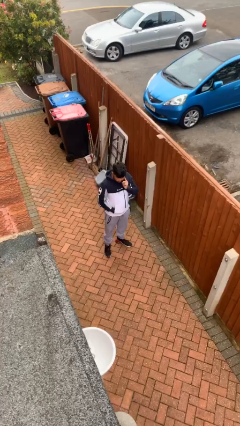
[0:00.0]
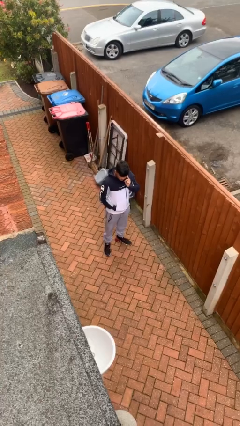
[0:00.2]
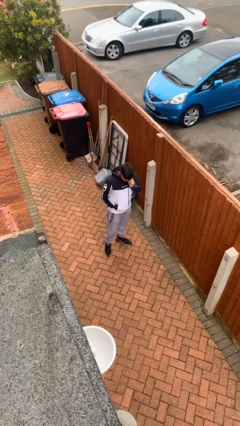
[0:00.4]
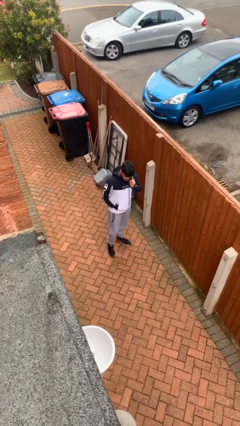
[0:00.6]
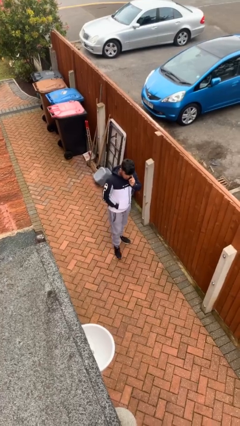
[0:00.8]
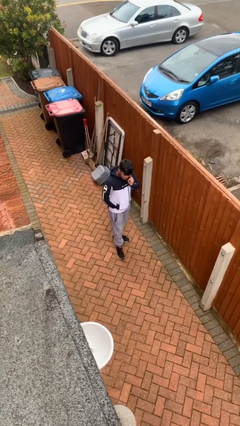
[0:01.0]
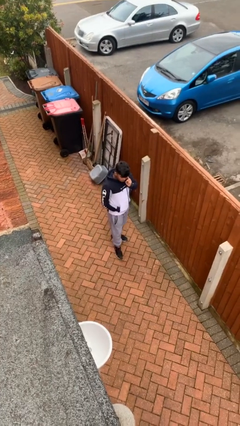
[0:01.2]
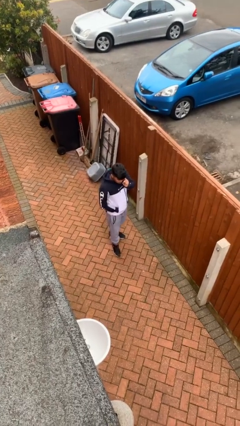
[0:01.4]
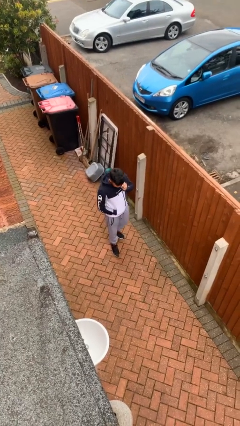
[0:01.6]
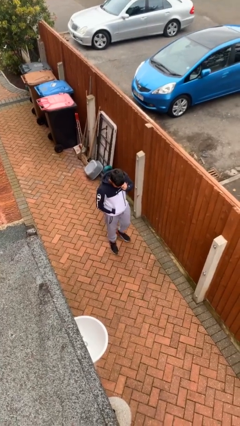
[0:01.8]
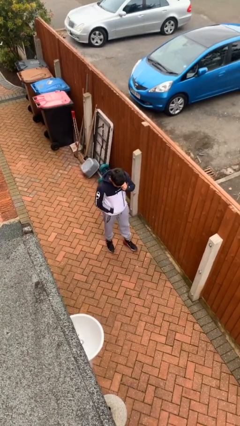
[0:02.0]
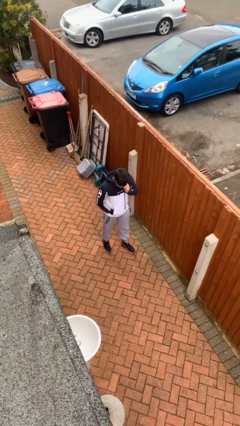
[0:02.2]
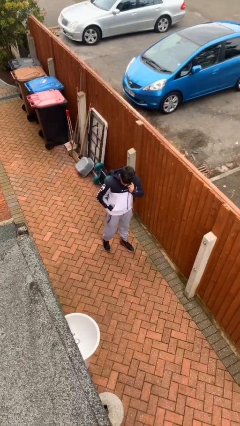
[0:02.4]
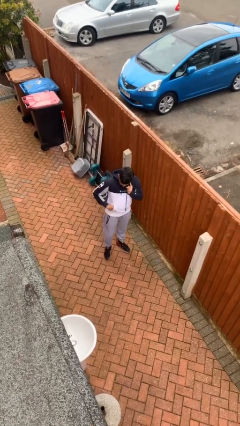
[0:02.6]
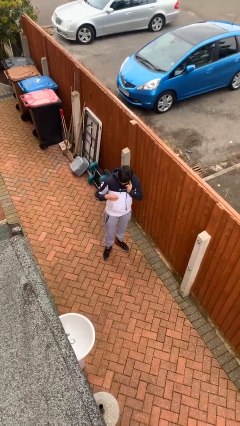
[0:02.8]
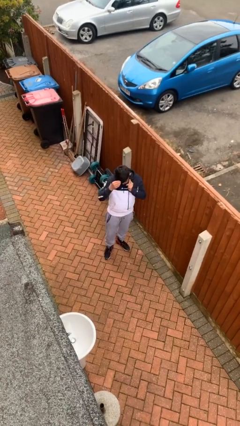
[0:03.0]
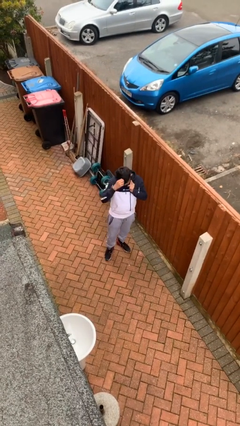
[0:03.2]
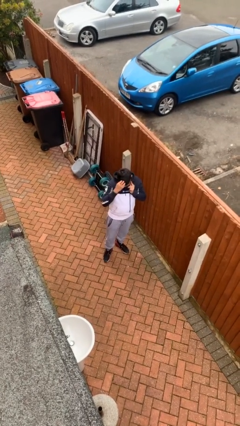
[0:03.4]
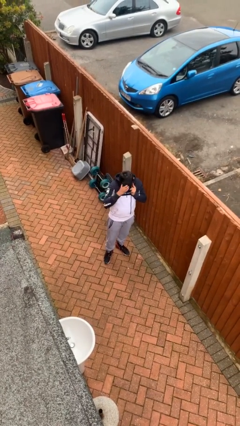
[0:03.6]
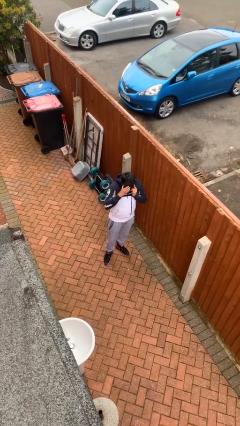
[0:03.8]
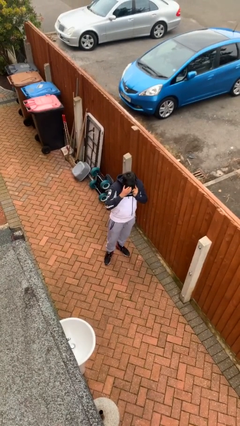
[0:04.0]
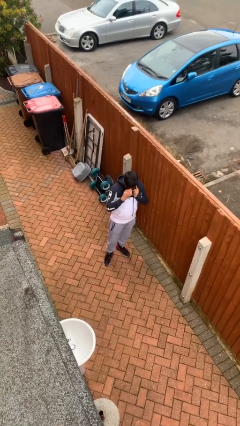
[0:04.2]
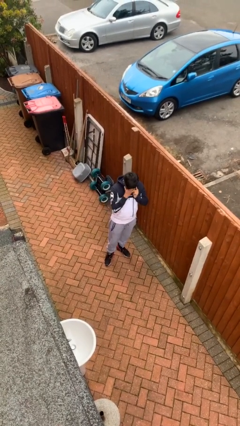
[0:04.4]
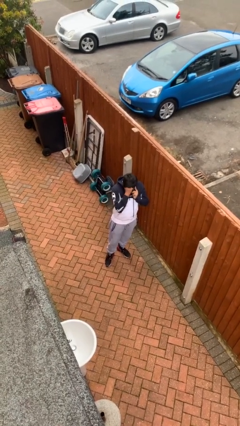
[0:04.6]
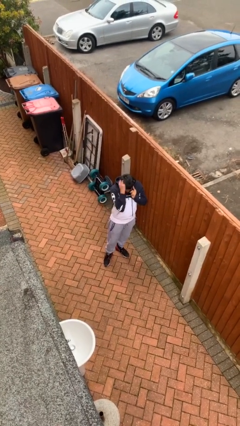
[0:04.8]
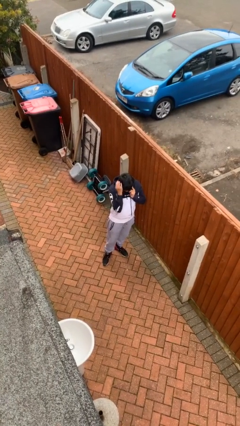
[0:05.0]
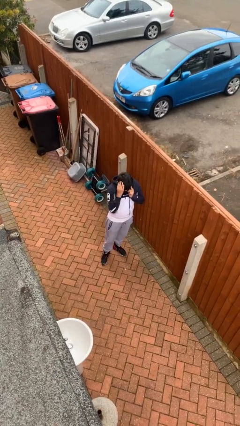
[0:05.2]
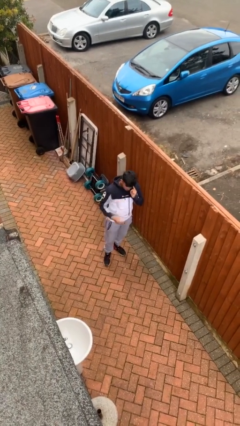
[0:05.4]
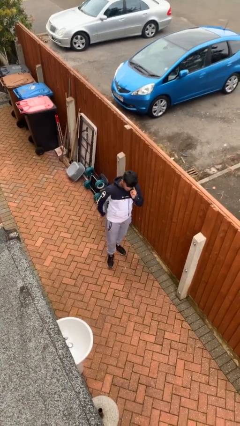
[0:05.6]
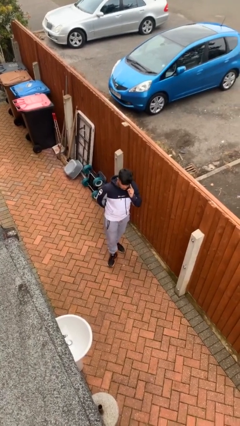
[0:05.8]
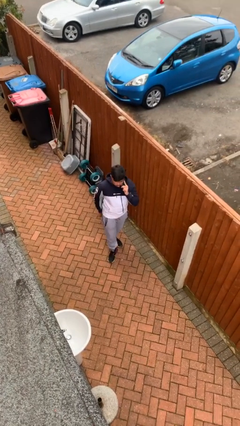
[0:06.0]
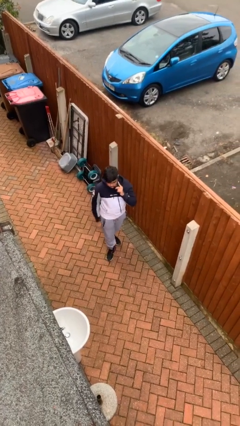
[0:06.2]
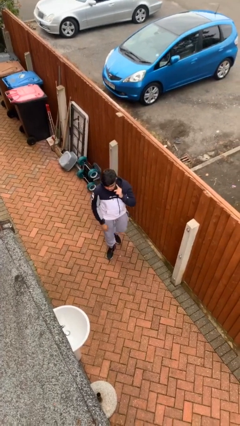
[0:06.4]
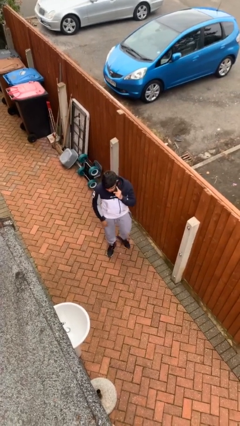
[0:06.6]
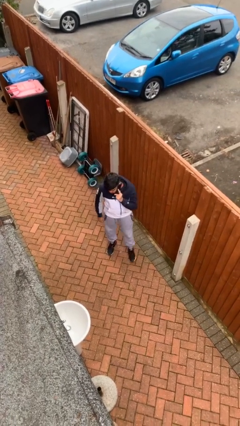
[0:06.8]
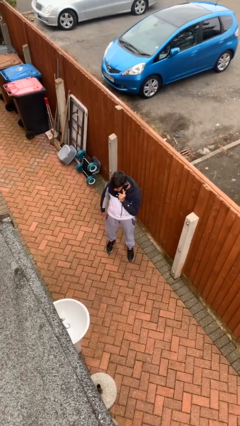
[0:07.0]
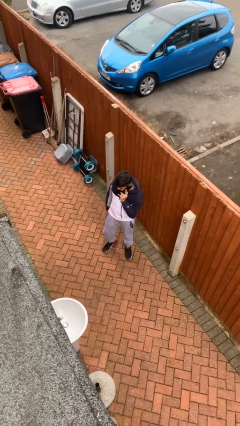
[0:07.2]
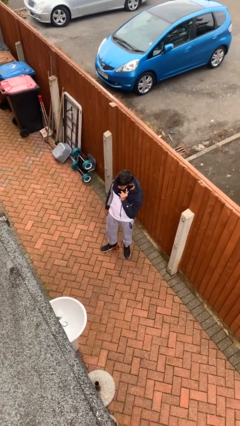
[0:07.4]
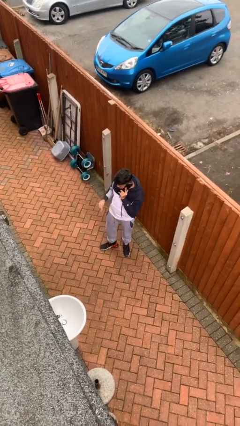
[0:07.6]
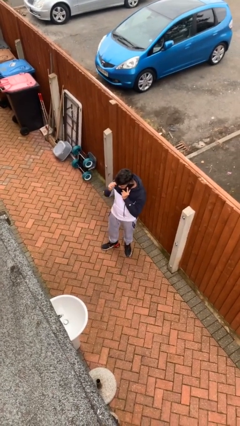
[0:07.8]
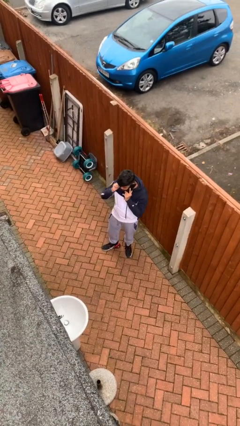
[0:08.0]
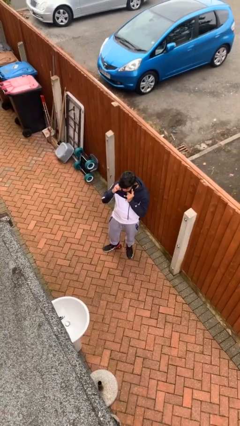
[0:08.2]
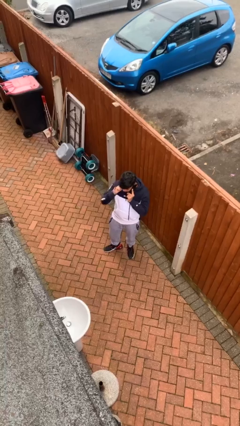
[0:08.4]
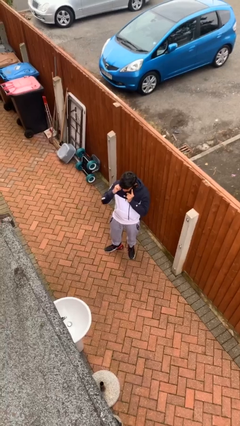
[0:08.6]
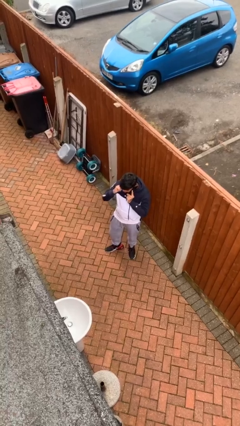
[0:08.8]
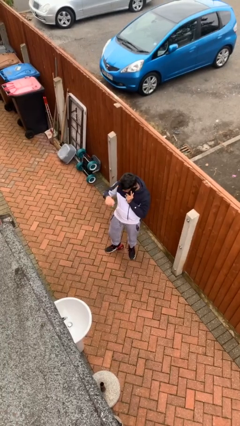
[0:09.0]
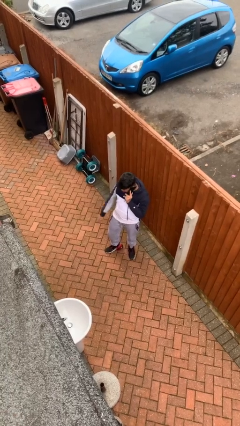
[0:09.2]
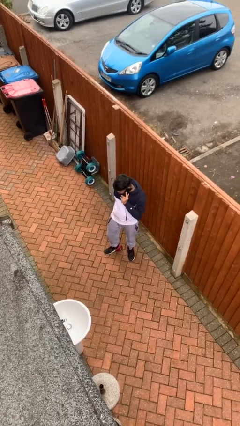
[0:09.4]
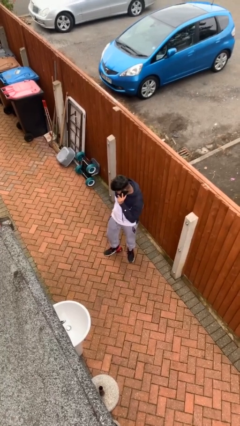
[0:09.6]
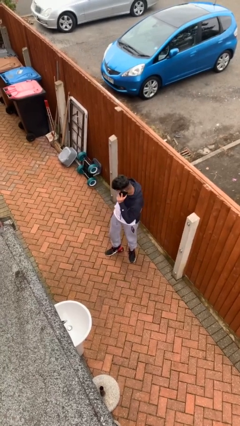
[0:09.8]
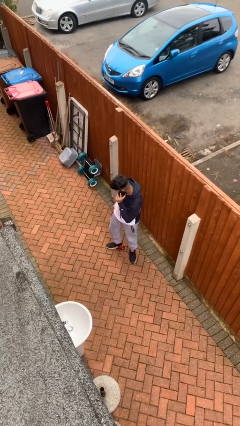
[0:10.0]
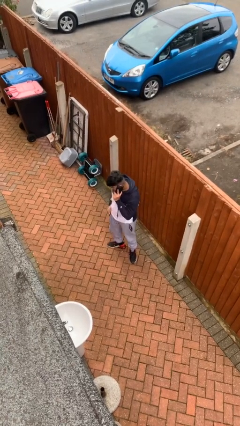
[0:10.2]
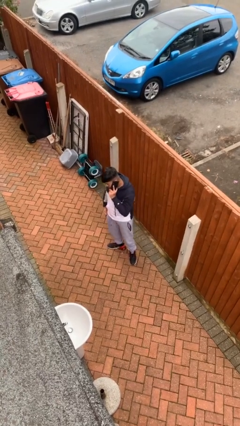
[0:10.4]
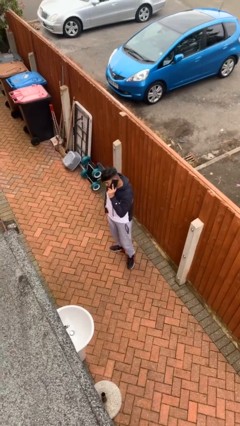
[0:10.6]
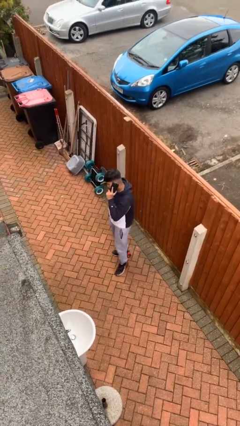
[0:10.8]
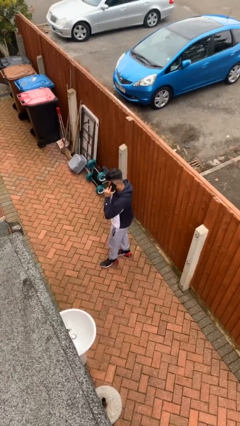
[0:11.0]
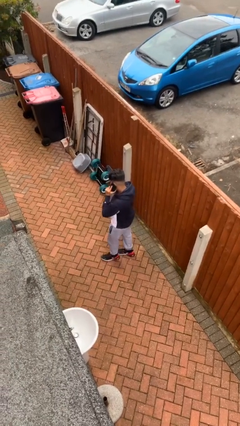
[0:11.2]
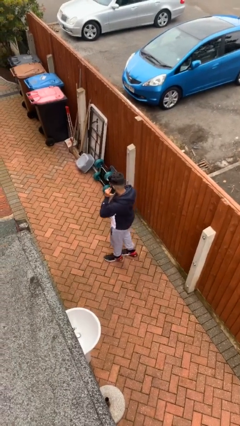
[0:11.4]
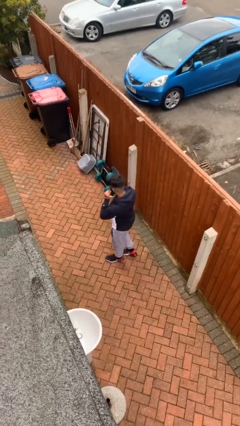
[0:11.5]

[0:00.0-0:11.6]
person talks on phone

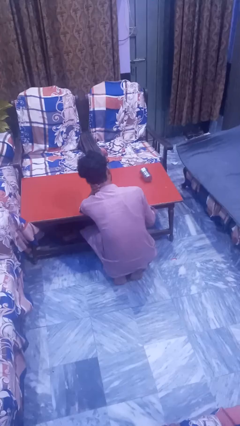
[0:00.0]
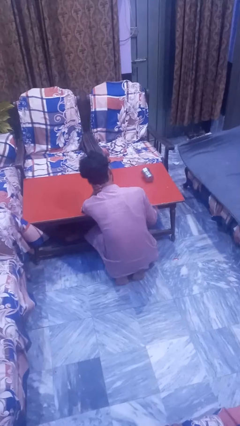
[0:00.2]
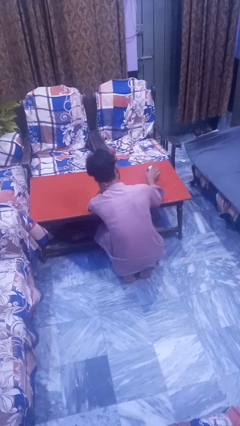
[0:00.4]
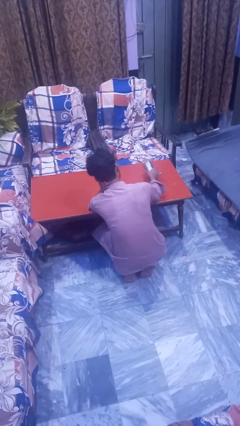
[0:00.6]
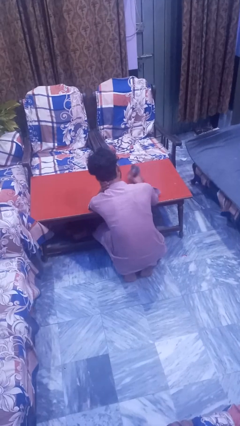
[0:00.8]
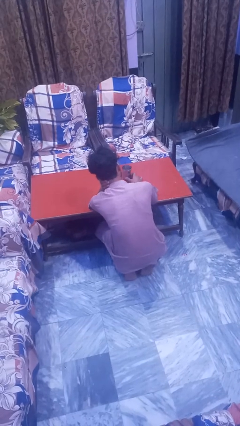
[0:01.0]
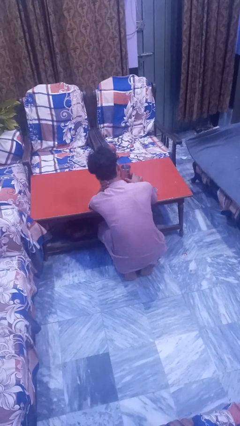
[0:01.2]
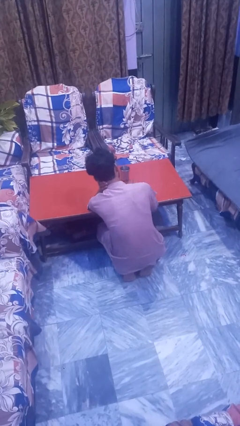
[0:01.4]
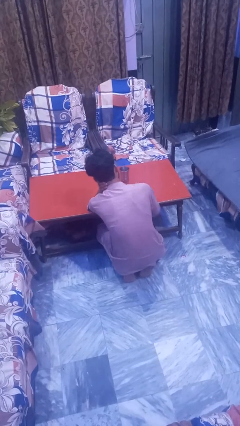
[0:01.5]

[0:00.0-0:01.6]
person sets upright glass

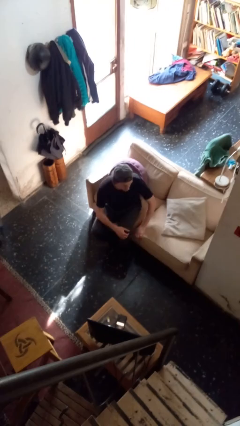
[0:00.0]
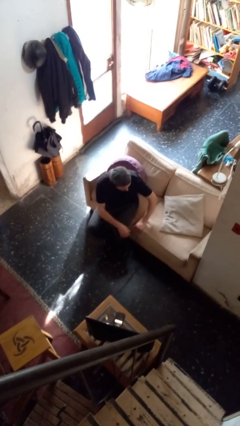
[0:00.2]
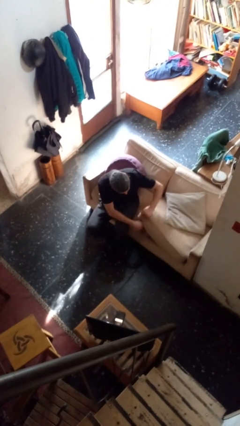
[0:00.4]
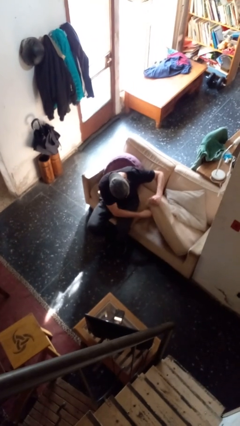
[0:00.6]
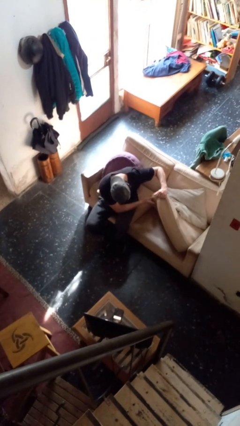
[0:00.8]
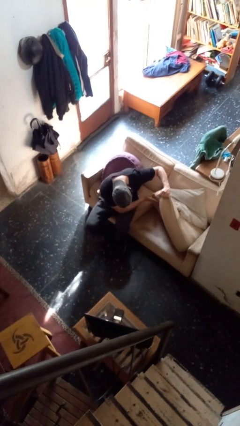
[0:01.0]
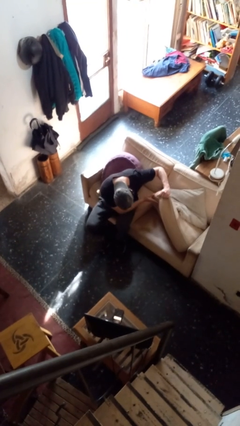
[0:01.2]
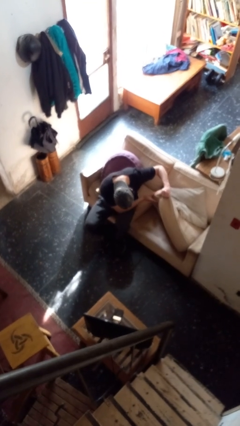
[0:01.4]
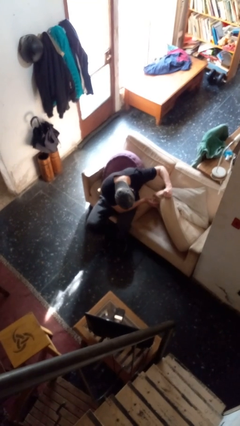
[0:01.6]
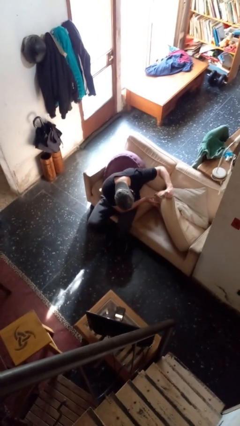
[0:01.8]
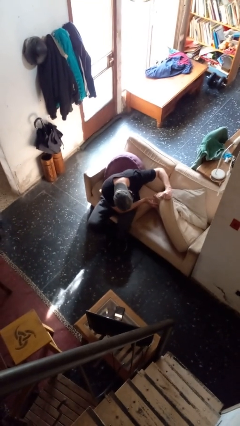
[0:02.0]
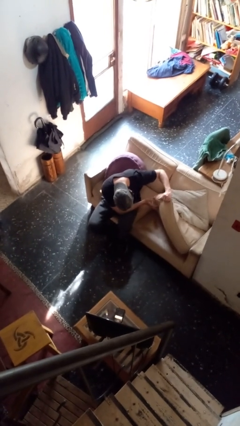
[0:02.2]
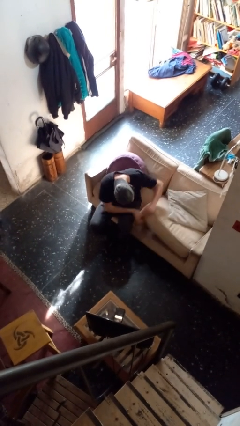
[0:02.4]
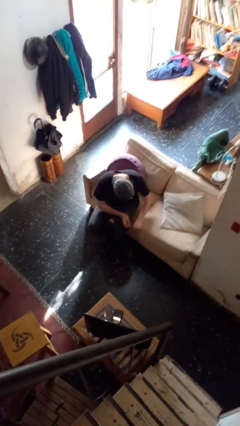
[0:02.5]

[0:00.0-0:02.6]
person searches in couch

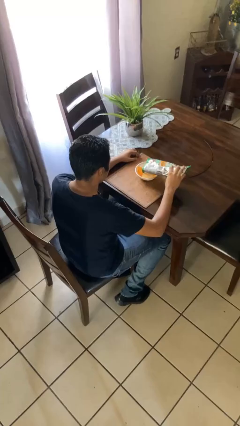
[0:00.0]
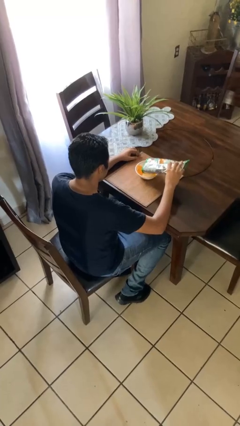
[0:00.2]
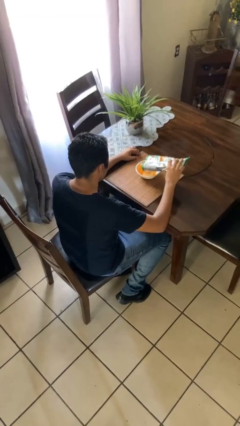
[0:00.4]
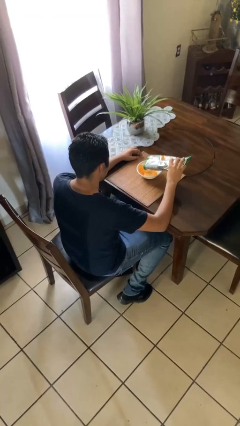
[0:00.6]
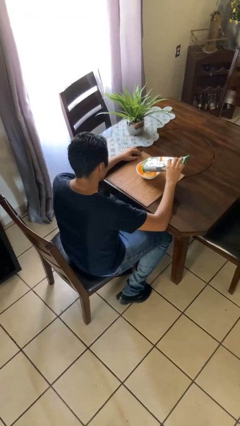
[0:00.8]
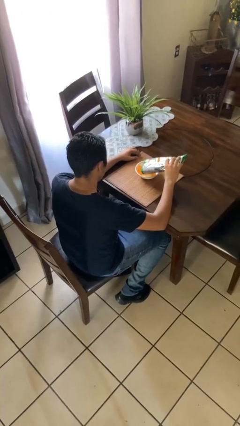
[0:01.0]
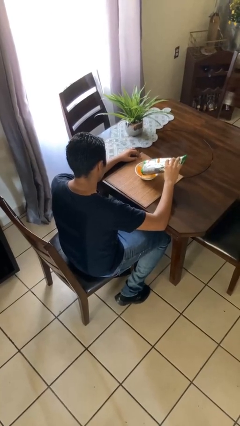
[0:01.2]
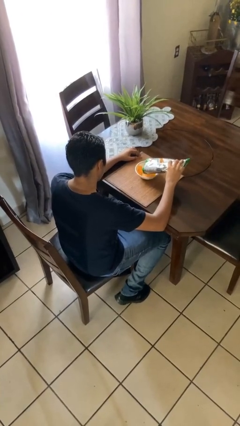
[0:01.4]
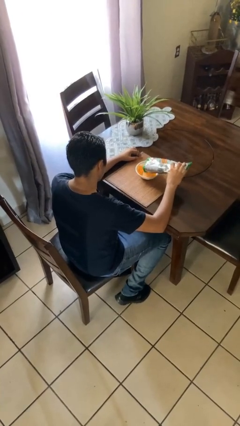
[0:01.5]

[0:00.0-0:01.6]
person pours into bowl

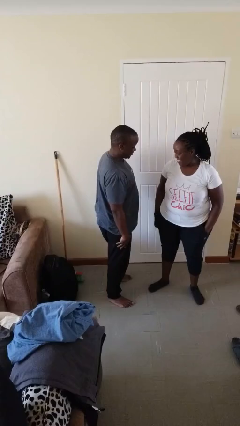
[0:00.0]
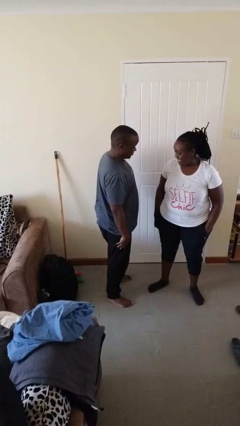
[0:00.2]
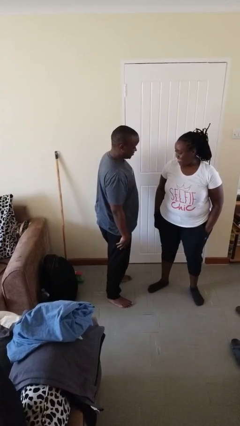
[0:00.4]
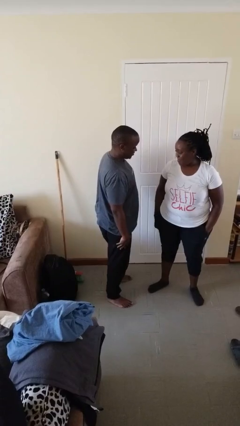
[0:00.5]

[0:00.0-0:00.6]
person grabs person by bicep
